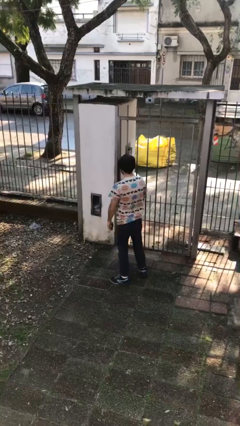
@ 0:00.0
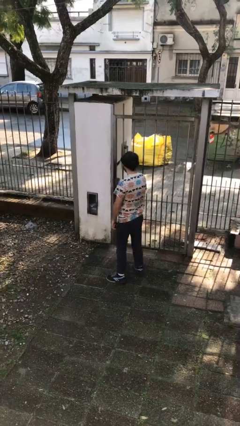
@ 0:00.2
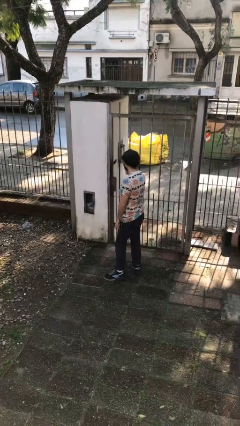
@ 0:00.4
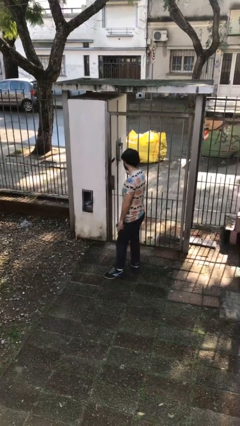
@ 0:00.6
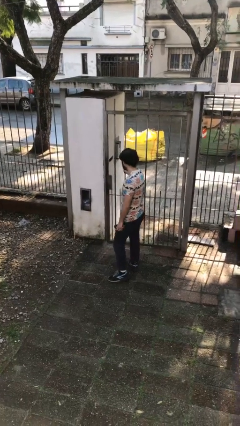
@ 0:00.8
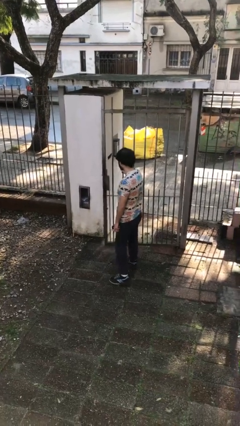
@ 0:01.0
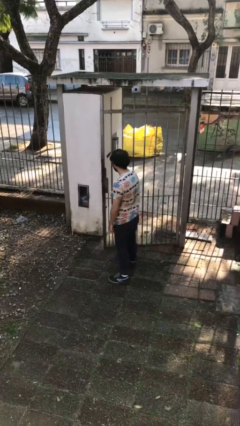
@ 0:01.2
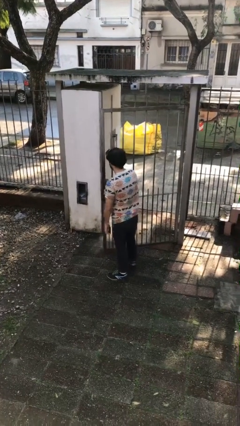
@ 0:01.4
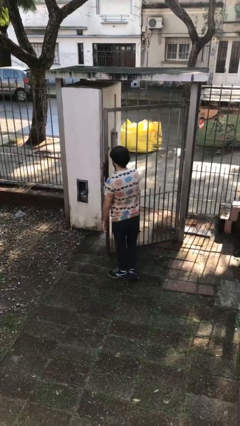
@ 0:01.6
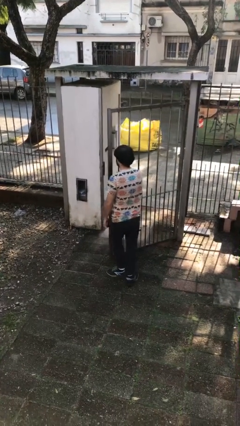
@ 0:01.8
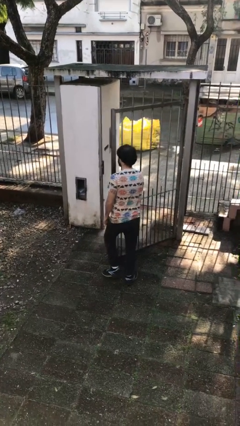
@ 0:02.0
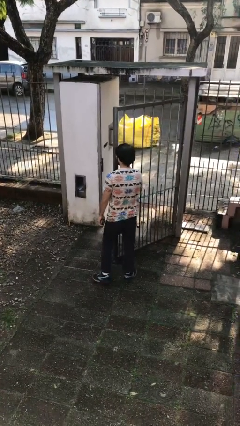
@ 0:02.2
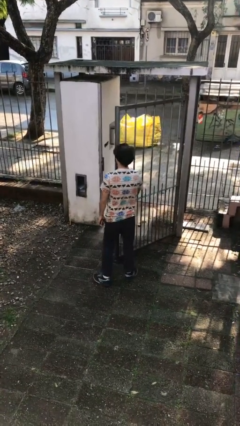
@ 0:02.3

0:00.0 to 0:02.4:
person opens gate

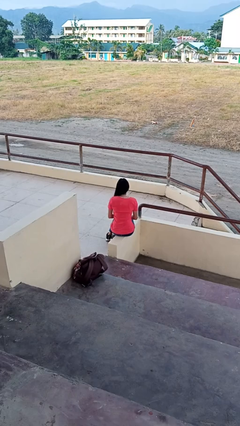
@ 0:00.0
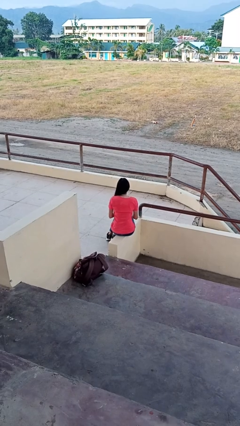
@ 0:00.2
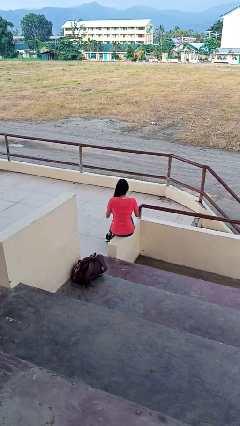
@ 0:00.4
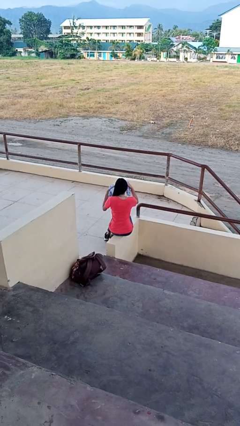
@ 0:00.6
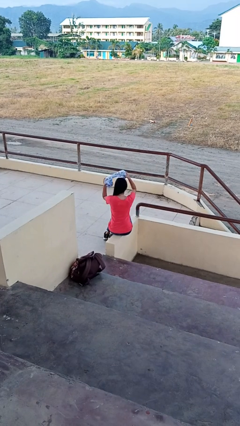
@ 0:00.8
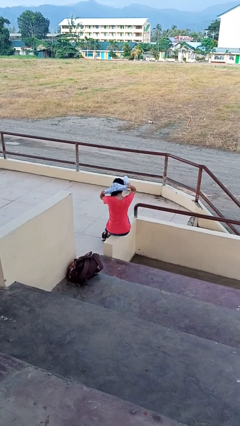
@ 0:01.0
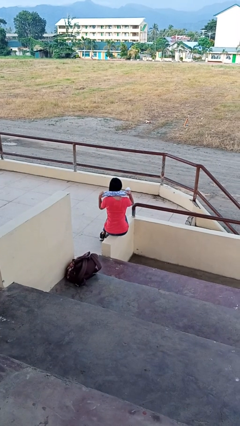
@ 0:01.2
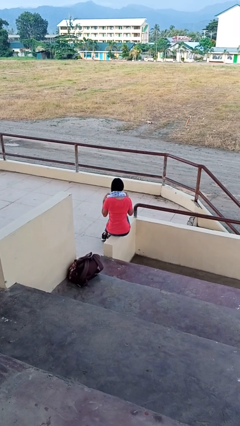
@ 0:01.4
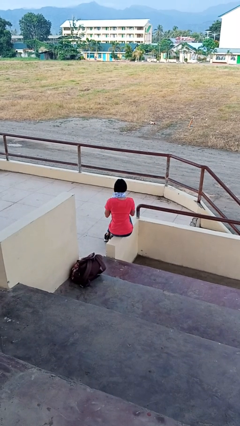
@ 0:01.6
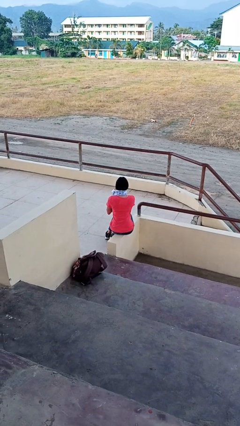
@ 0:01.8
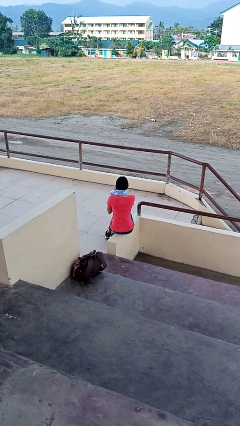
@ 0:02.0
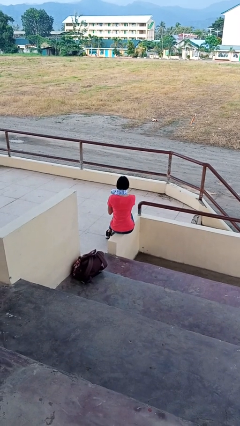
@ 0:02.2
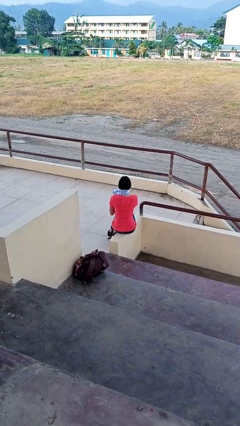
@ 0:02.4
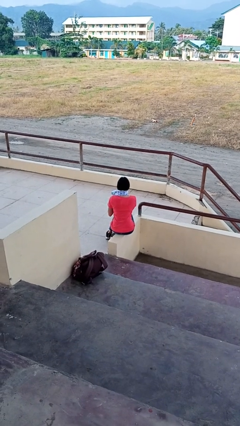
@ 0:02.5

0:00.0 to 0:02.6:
person puts on scarf

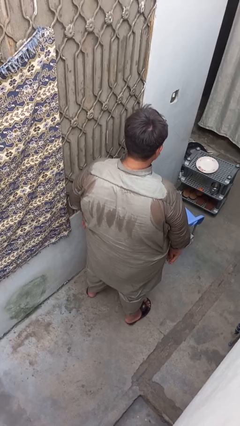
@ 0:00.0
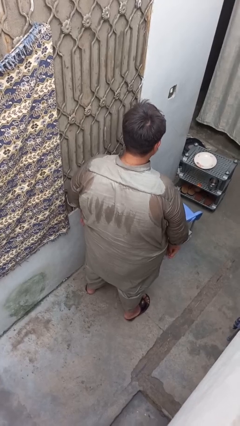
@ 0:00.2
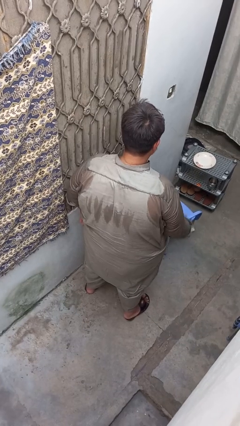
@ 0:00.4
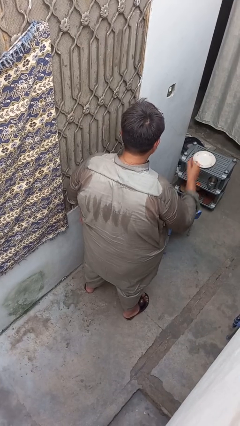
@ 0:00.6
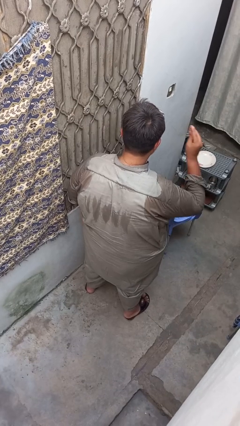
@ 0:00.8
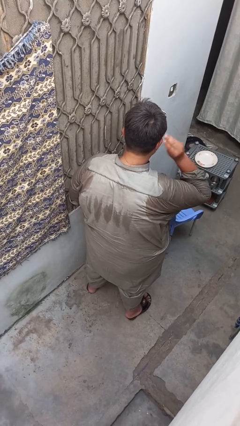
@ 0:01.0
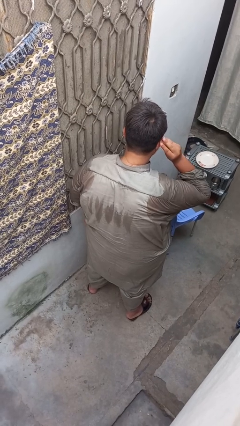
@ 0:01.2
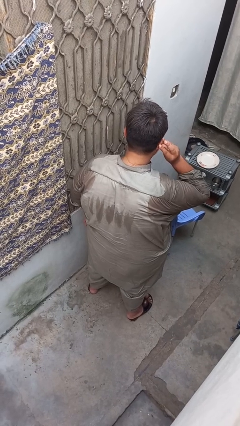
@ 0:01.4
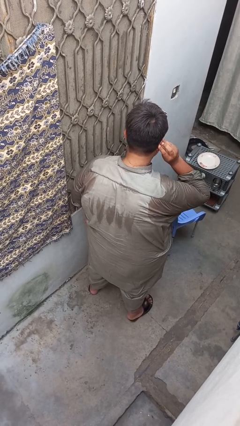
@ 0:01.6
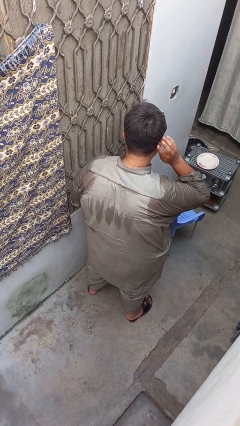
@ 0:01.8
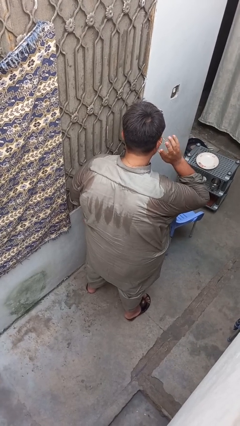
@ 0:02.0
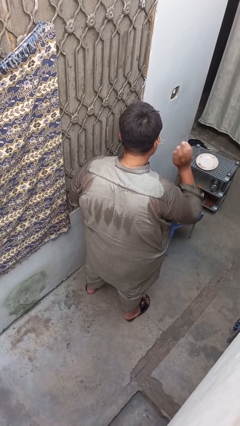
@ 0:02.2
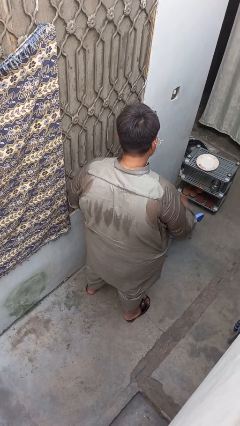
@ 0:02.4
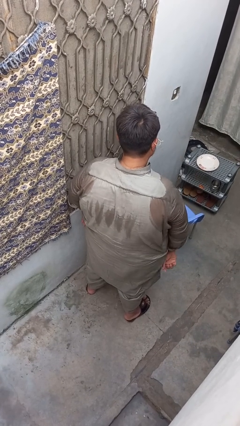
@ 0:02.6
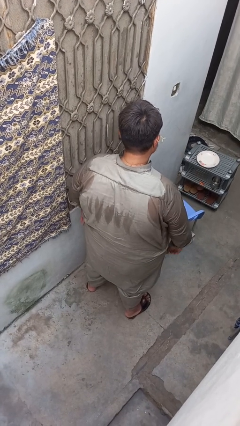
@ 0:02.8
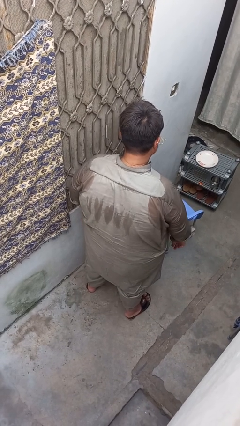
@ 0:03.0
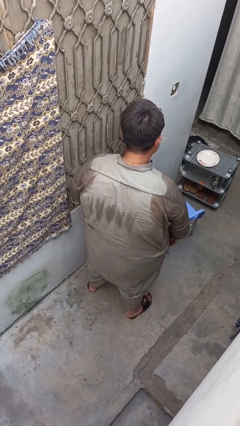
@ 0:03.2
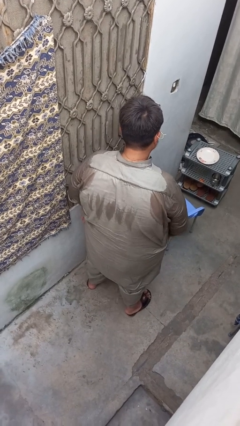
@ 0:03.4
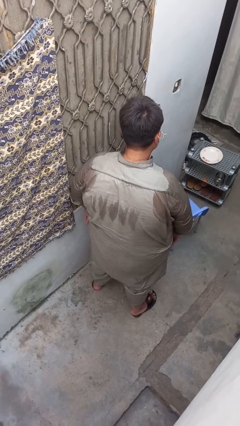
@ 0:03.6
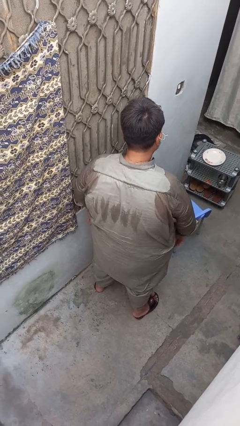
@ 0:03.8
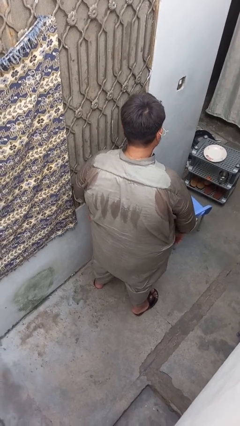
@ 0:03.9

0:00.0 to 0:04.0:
person puts on earrings

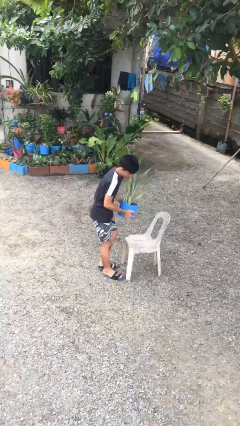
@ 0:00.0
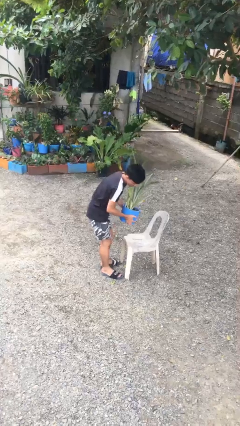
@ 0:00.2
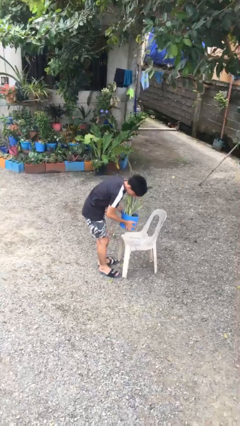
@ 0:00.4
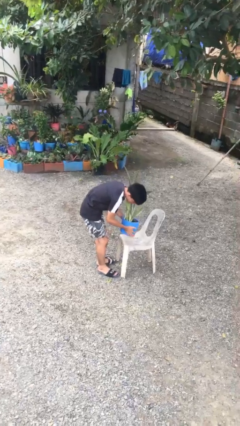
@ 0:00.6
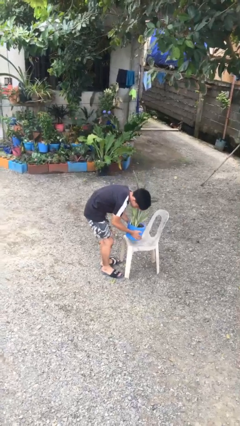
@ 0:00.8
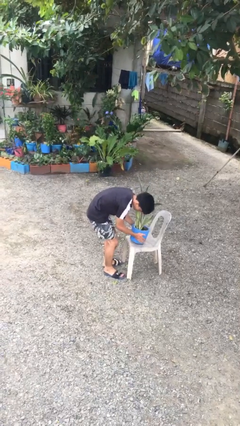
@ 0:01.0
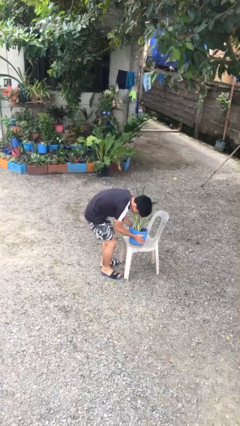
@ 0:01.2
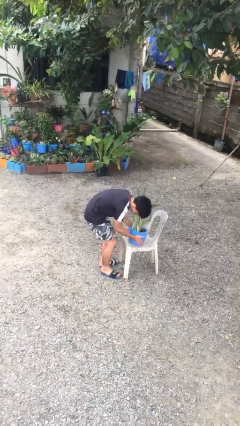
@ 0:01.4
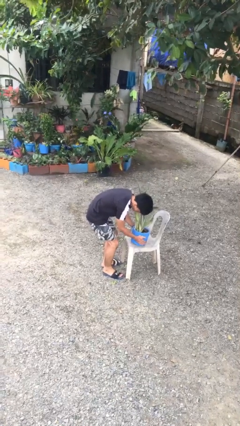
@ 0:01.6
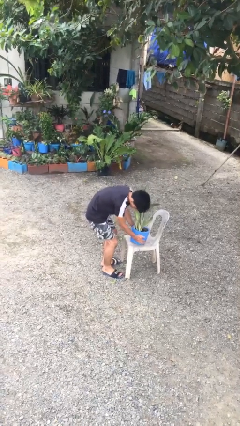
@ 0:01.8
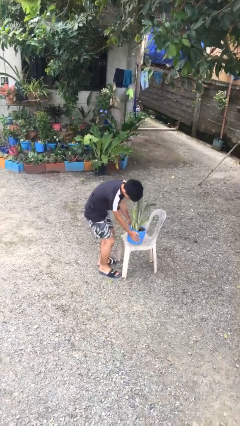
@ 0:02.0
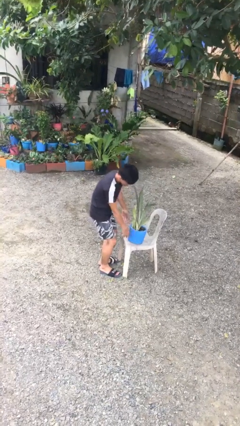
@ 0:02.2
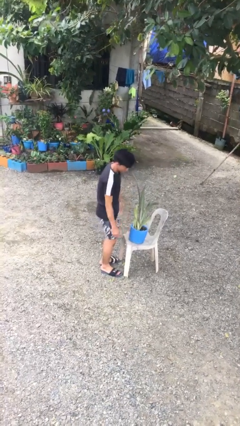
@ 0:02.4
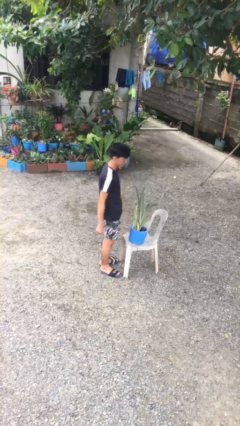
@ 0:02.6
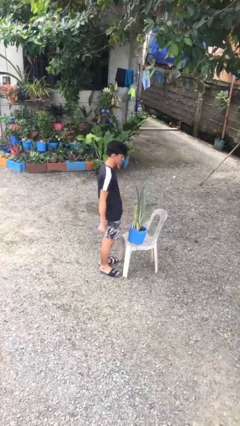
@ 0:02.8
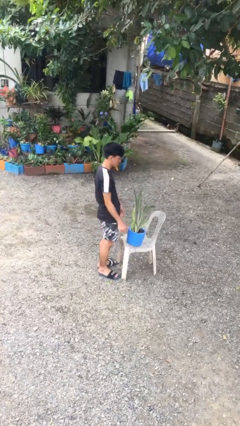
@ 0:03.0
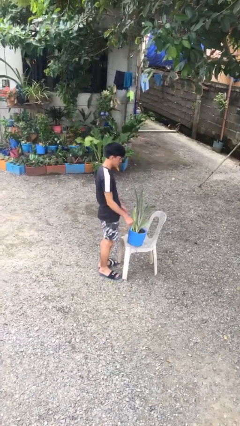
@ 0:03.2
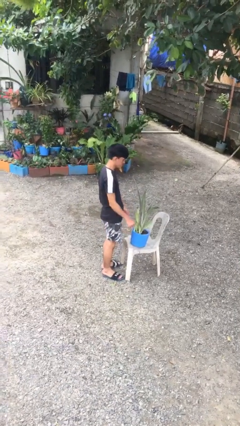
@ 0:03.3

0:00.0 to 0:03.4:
person puts down object on floor

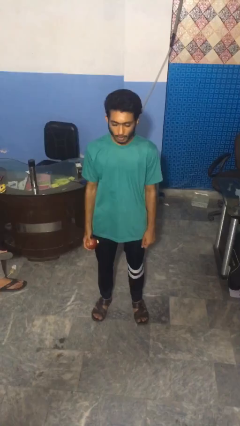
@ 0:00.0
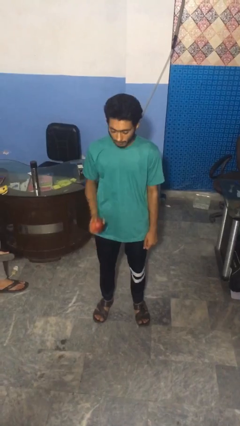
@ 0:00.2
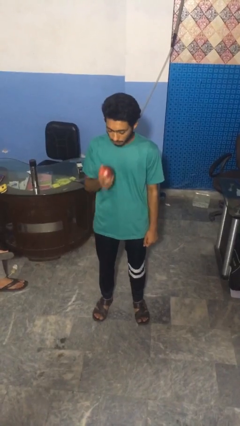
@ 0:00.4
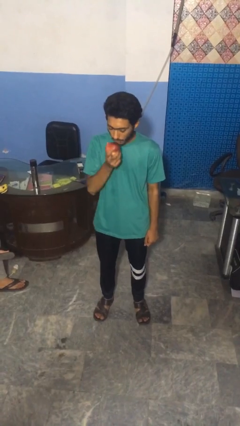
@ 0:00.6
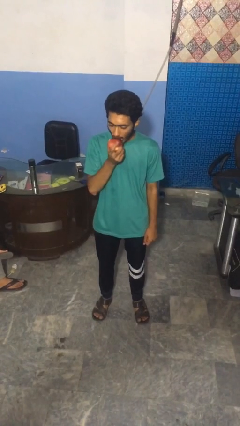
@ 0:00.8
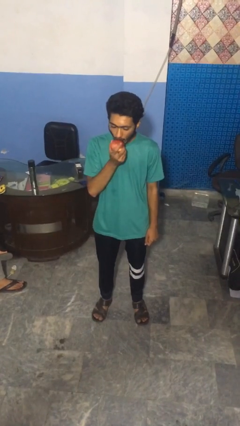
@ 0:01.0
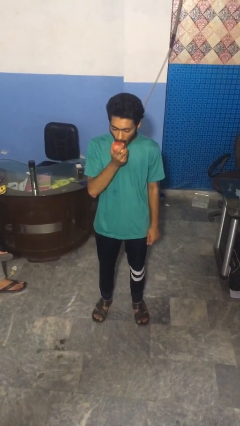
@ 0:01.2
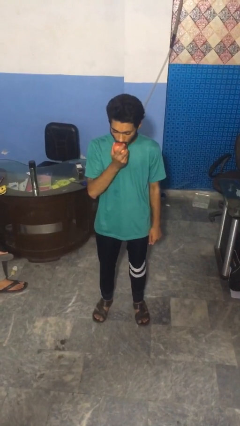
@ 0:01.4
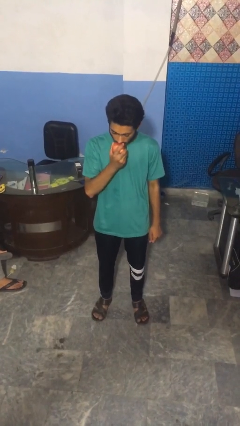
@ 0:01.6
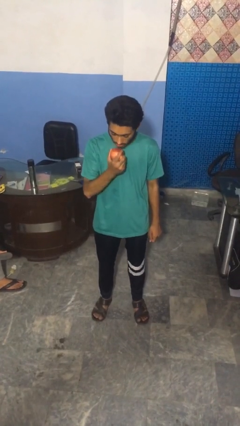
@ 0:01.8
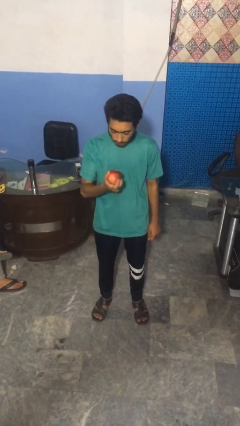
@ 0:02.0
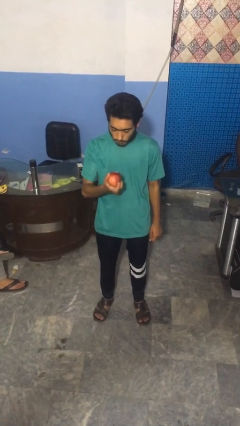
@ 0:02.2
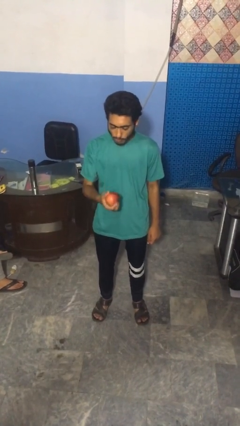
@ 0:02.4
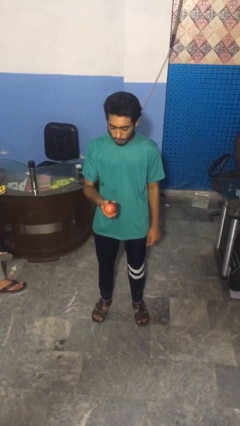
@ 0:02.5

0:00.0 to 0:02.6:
person eats apple

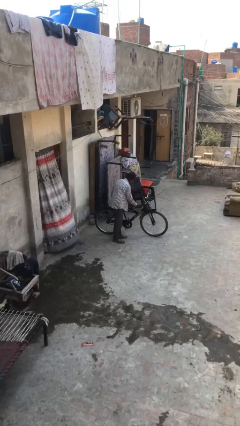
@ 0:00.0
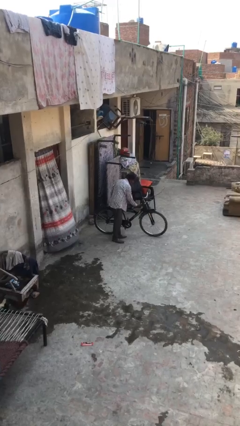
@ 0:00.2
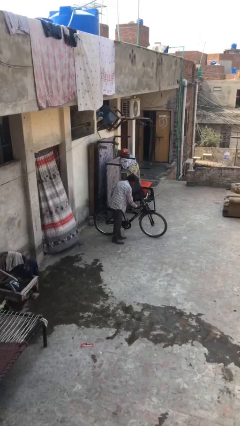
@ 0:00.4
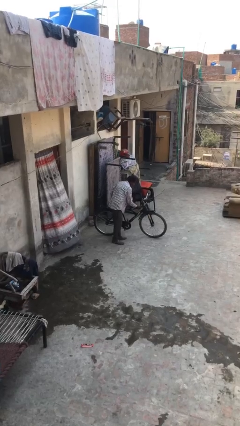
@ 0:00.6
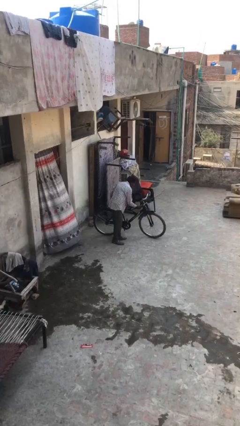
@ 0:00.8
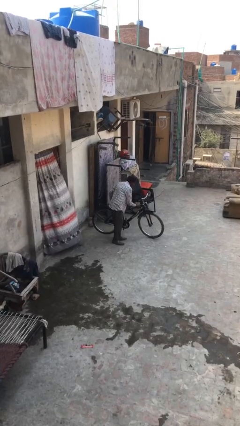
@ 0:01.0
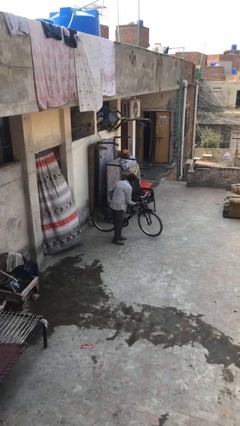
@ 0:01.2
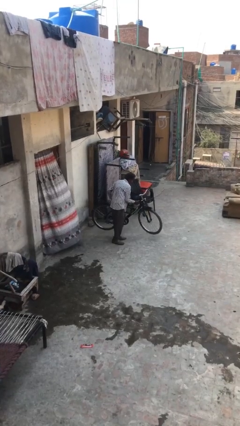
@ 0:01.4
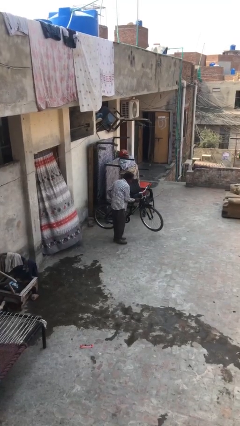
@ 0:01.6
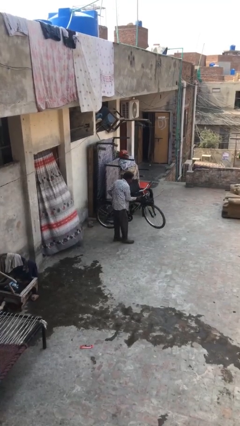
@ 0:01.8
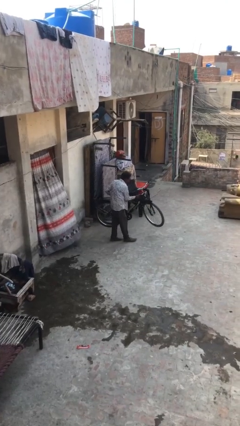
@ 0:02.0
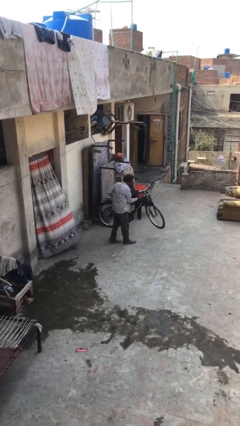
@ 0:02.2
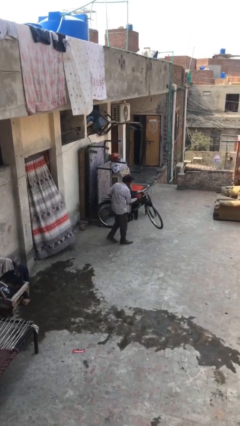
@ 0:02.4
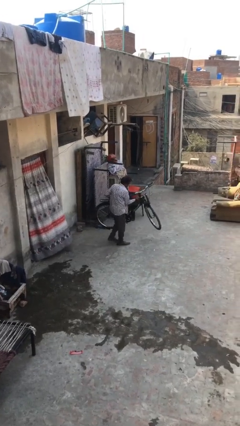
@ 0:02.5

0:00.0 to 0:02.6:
person picks up object from floor
